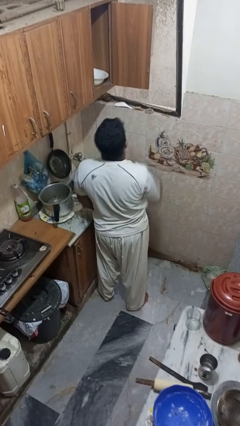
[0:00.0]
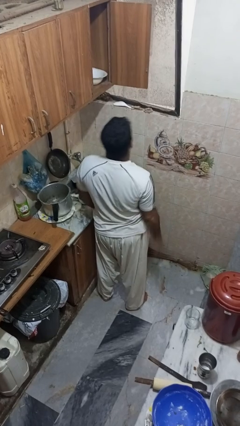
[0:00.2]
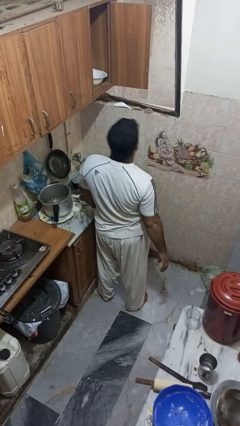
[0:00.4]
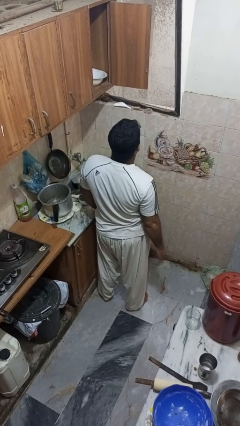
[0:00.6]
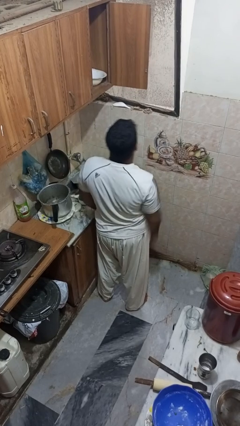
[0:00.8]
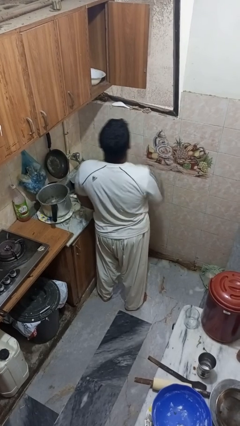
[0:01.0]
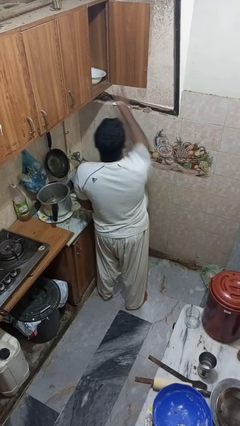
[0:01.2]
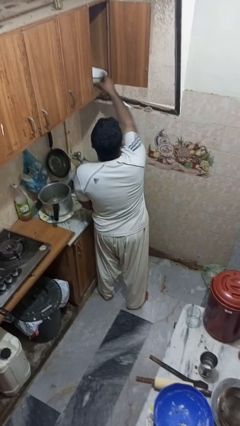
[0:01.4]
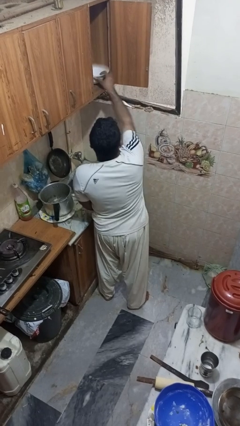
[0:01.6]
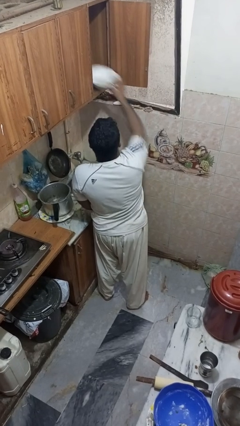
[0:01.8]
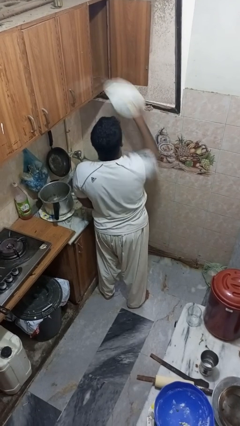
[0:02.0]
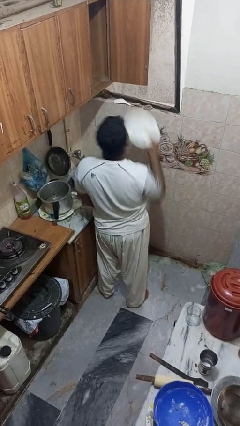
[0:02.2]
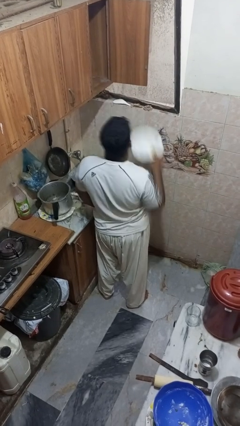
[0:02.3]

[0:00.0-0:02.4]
person takes object from cabinet

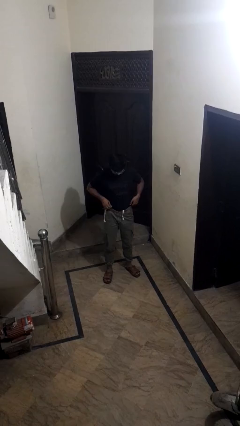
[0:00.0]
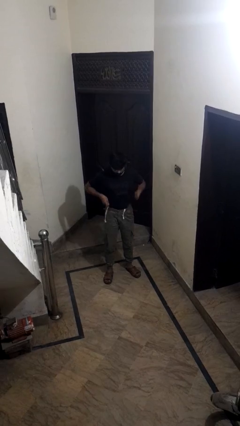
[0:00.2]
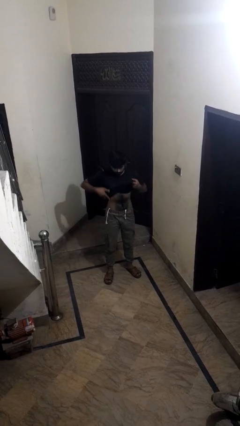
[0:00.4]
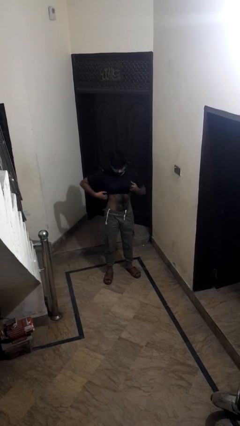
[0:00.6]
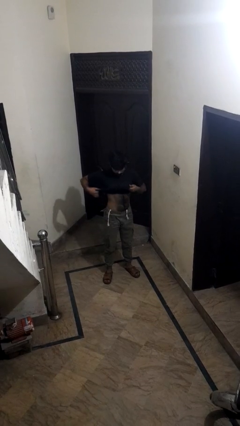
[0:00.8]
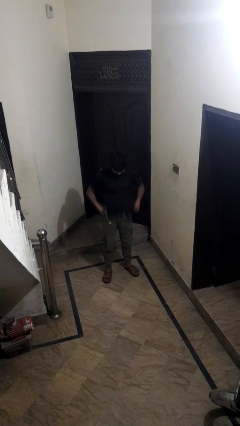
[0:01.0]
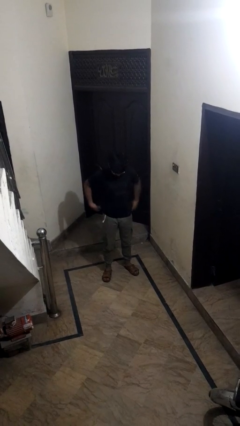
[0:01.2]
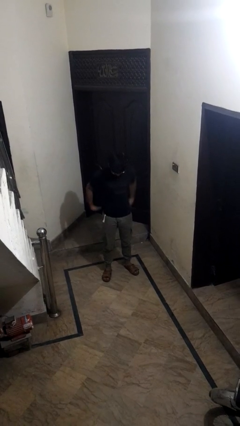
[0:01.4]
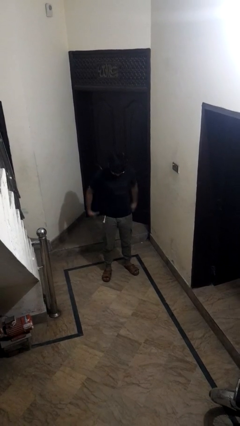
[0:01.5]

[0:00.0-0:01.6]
person untucks shirt

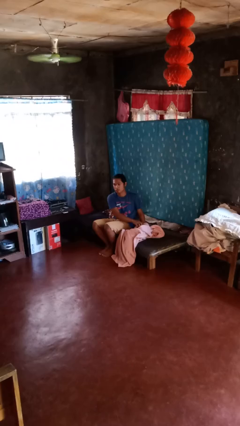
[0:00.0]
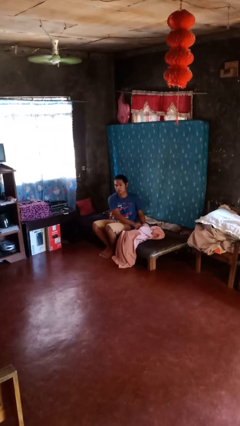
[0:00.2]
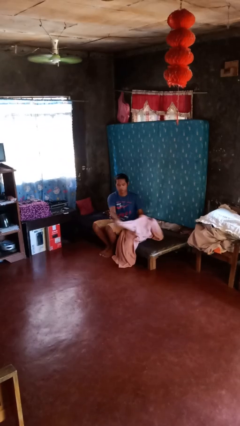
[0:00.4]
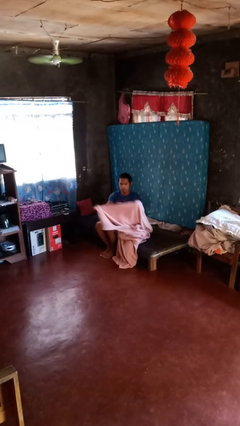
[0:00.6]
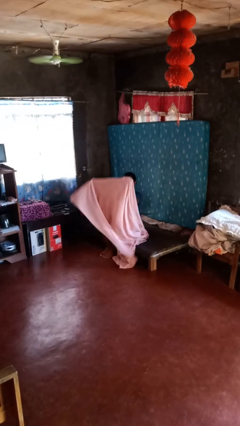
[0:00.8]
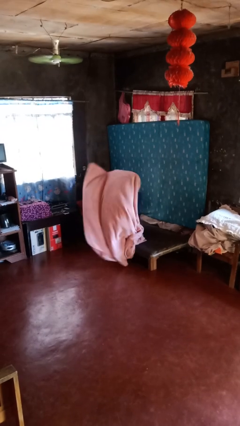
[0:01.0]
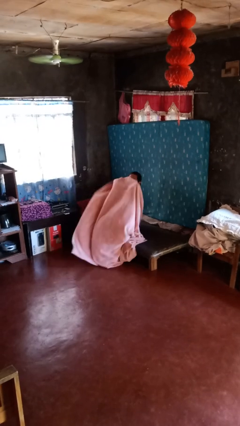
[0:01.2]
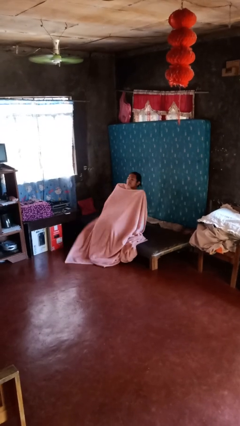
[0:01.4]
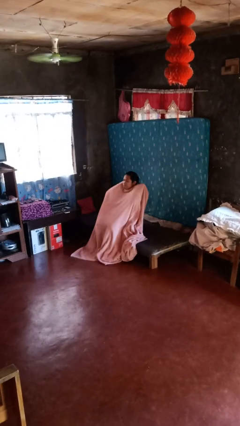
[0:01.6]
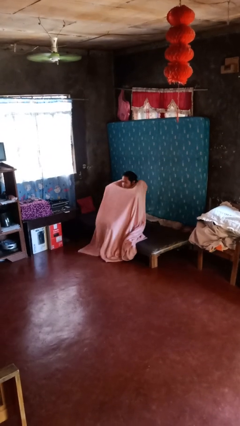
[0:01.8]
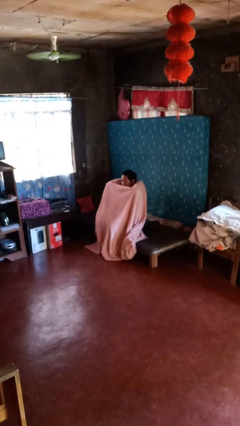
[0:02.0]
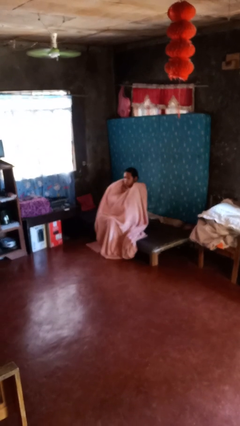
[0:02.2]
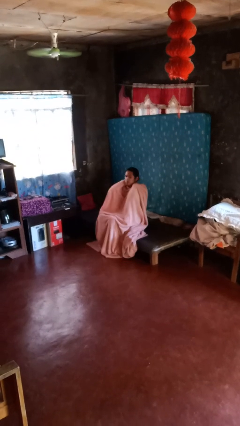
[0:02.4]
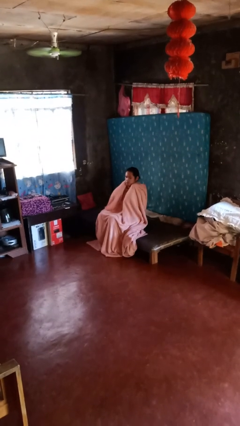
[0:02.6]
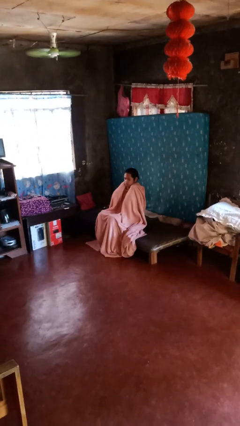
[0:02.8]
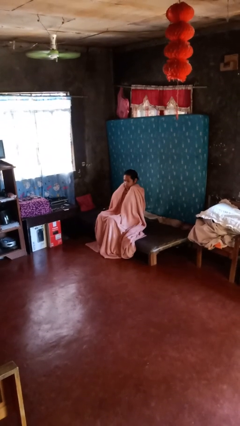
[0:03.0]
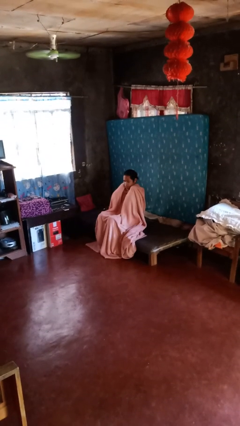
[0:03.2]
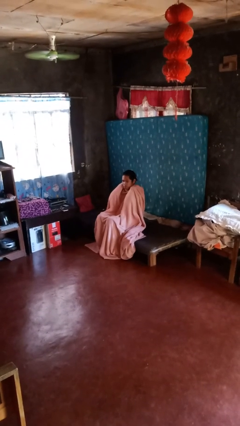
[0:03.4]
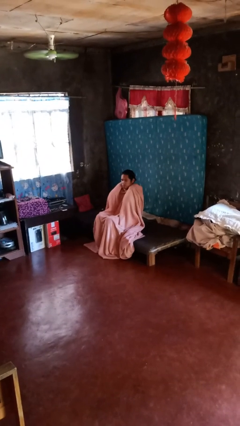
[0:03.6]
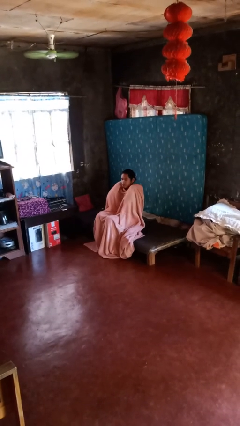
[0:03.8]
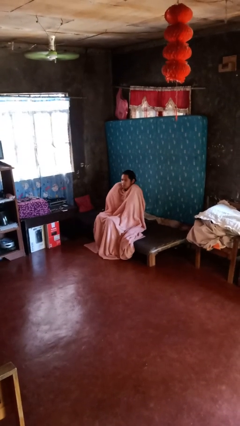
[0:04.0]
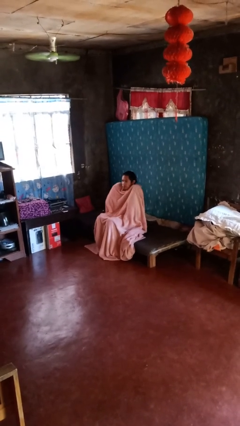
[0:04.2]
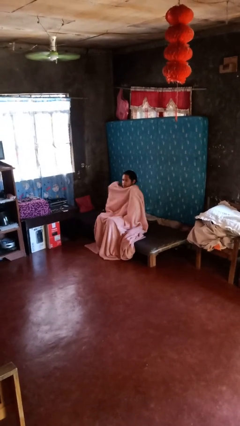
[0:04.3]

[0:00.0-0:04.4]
person covers with blanket

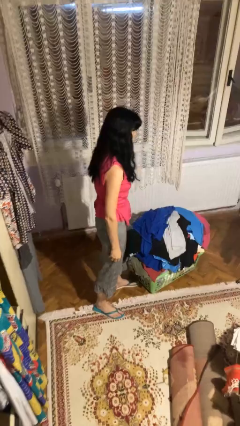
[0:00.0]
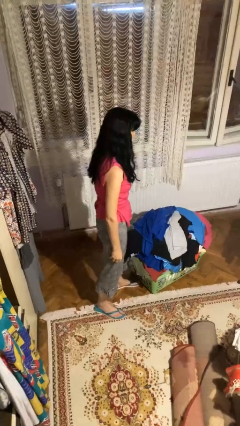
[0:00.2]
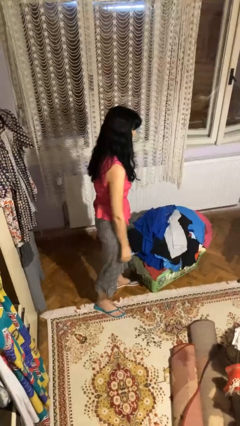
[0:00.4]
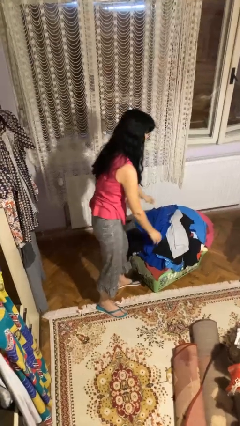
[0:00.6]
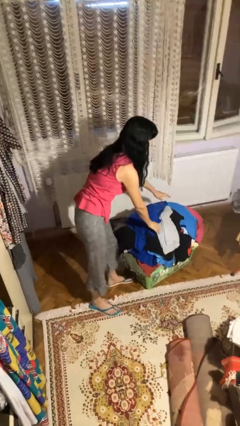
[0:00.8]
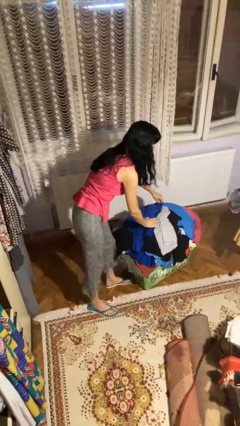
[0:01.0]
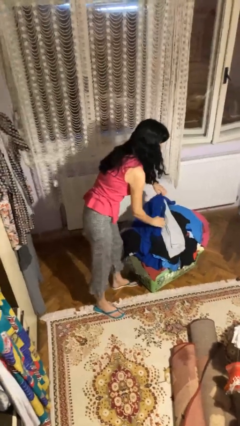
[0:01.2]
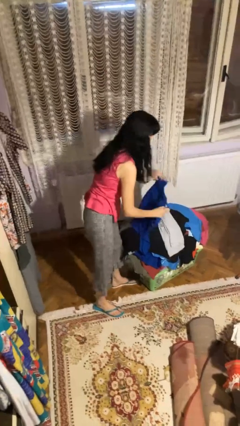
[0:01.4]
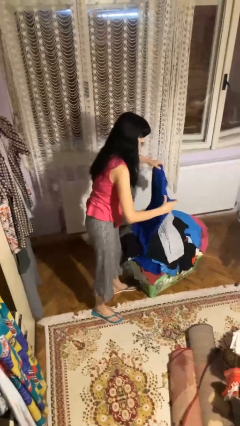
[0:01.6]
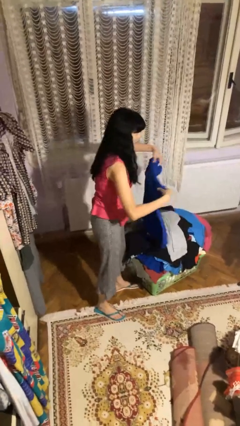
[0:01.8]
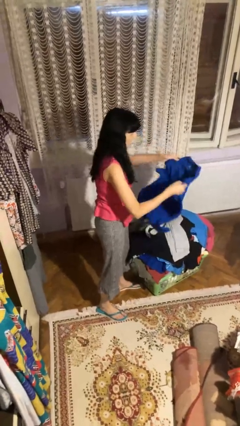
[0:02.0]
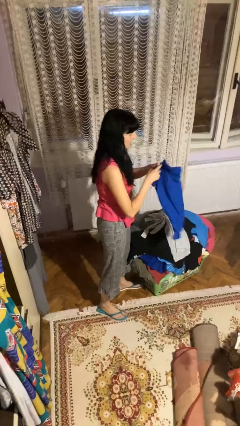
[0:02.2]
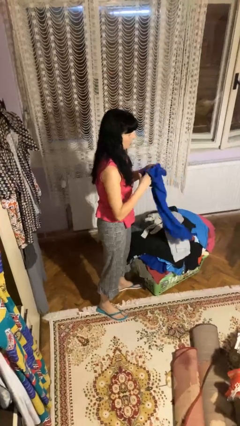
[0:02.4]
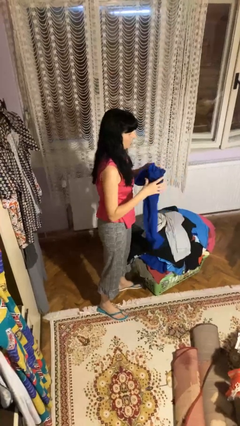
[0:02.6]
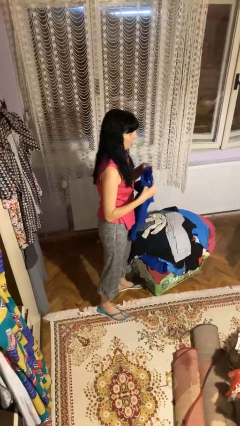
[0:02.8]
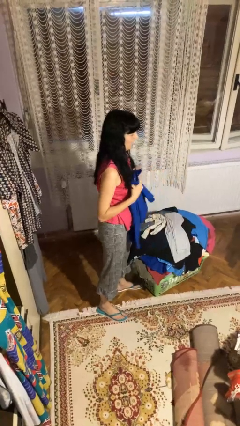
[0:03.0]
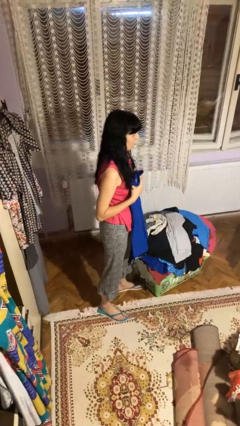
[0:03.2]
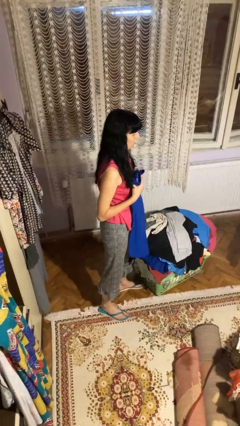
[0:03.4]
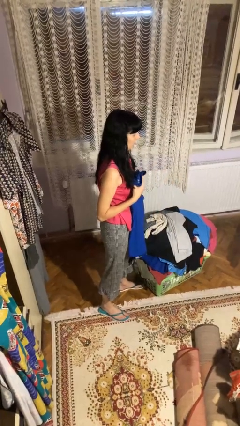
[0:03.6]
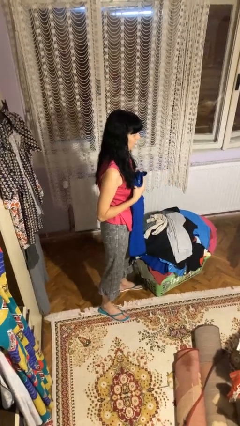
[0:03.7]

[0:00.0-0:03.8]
person folds shirt

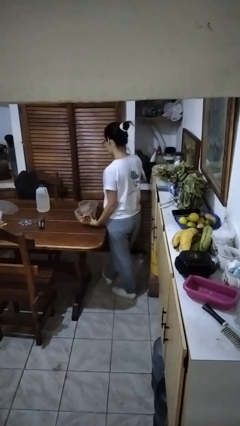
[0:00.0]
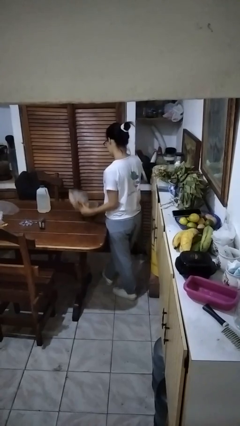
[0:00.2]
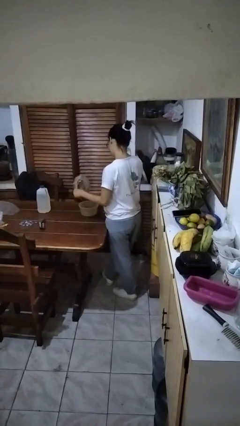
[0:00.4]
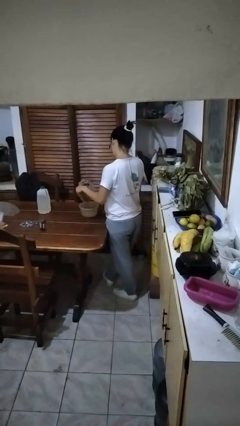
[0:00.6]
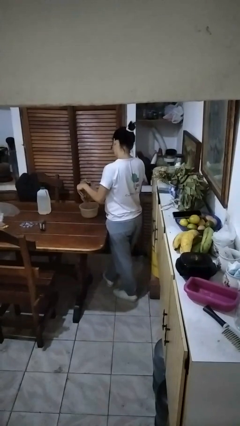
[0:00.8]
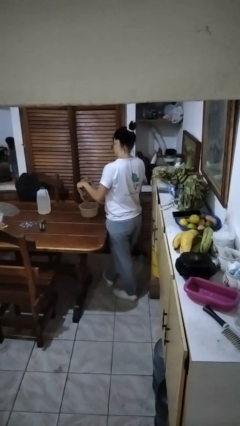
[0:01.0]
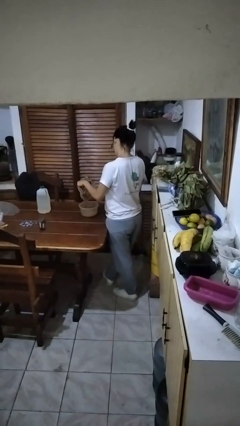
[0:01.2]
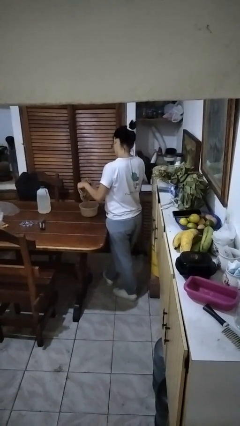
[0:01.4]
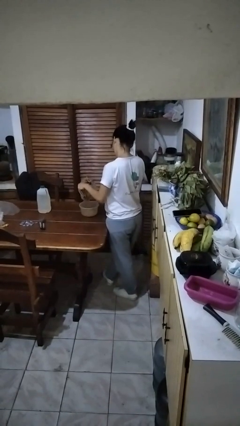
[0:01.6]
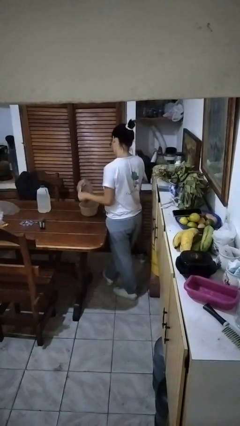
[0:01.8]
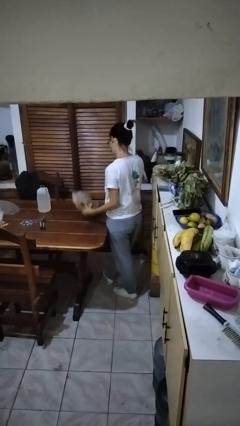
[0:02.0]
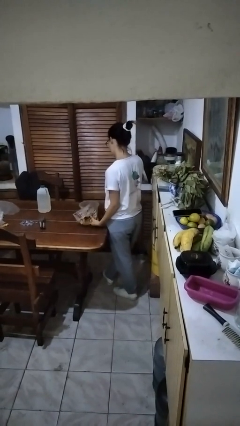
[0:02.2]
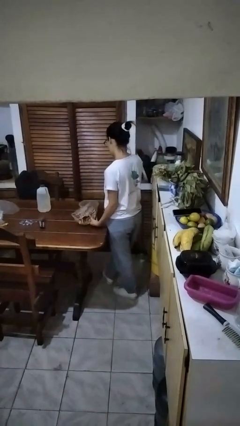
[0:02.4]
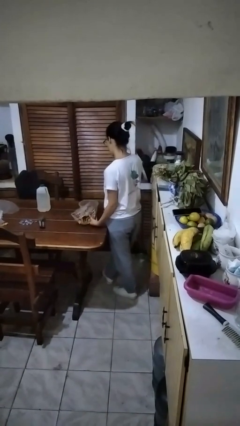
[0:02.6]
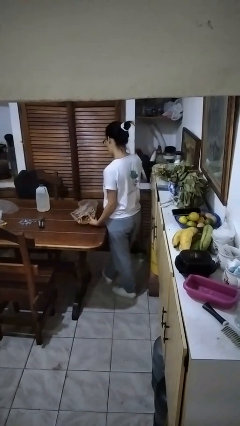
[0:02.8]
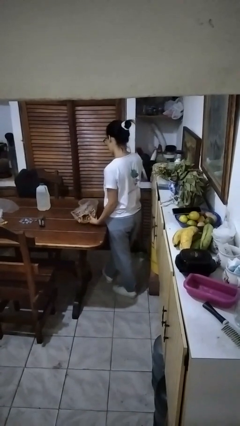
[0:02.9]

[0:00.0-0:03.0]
person pours into bowl

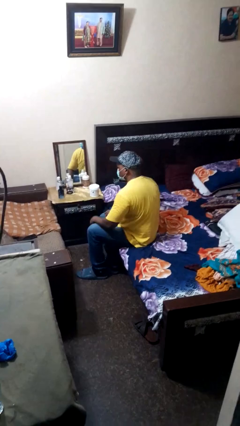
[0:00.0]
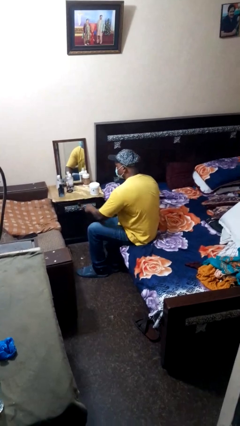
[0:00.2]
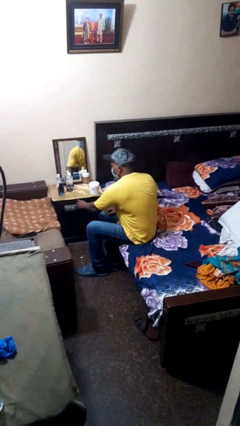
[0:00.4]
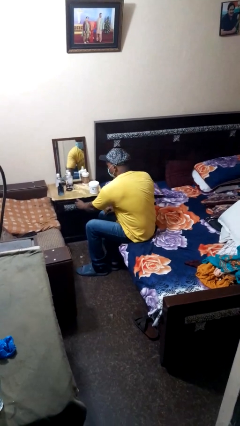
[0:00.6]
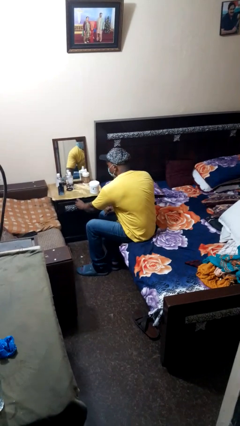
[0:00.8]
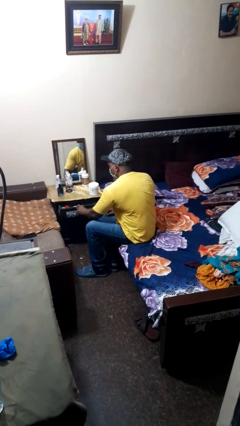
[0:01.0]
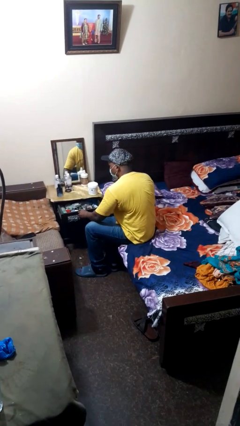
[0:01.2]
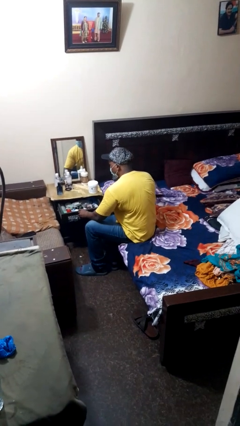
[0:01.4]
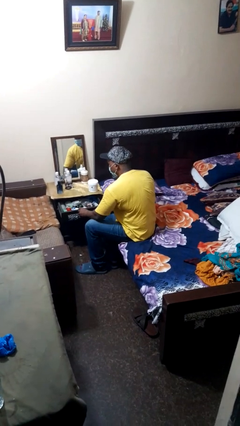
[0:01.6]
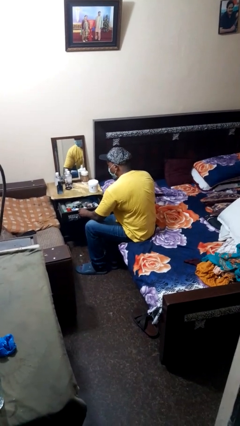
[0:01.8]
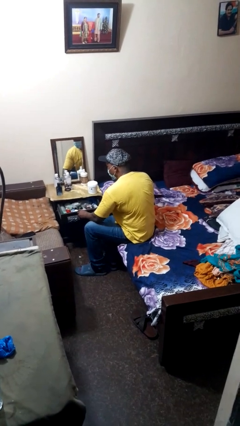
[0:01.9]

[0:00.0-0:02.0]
person opens dresser drawer
